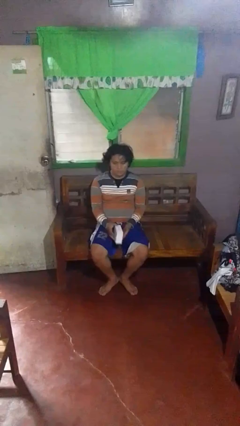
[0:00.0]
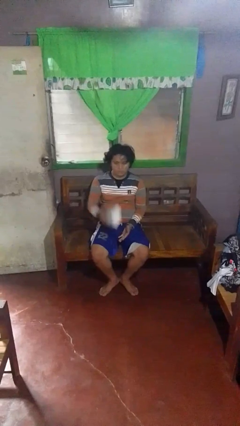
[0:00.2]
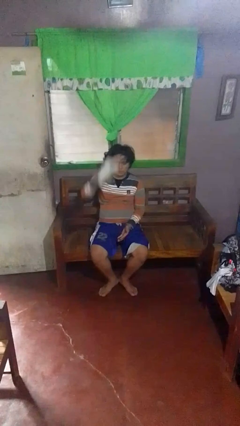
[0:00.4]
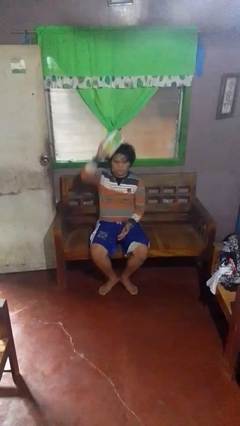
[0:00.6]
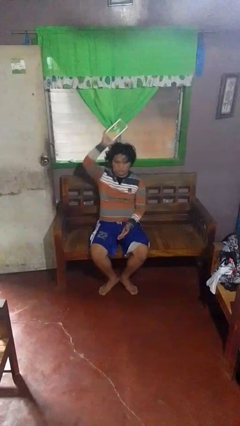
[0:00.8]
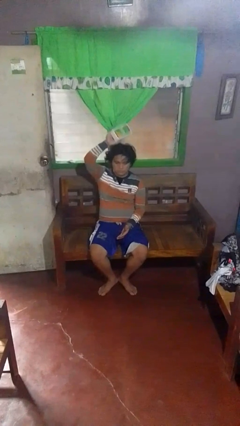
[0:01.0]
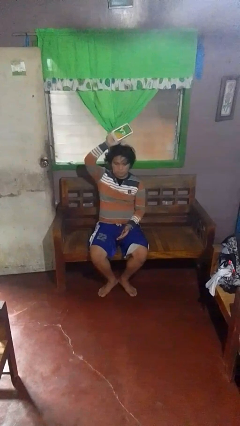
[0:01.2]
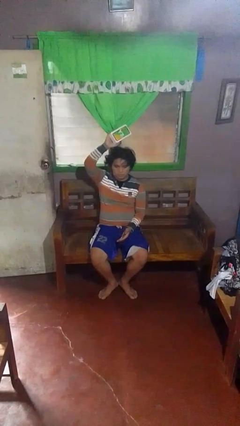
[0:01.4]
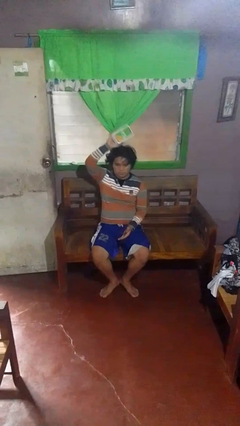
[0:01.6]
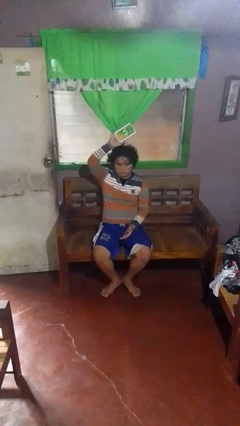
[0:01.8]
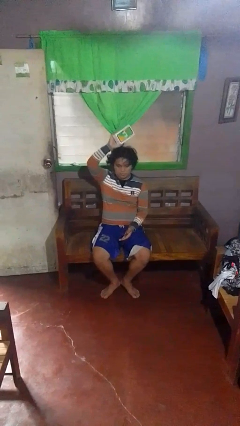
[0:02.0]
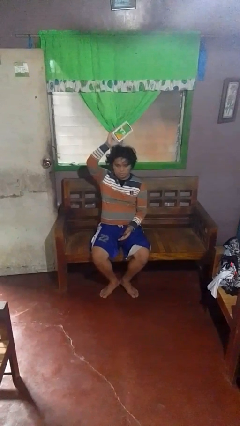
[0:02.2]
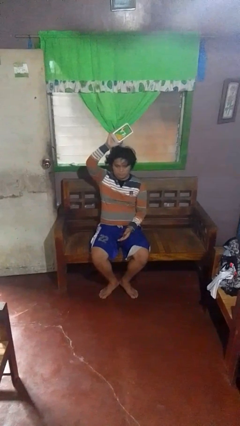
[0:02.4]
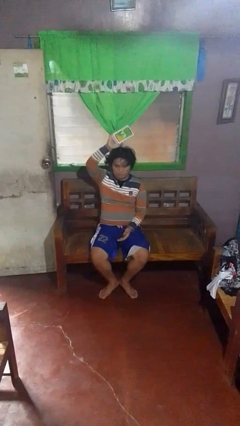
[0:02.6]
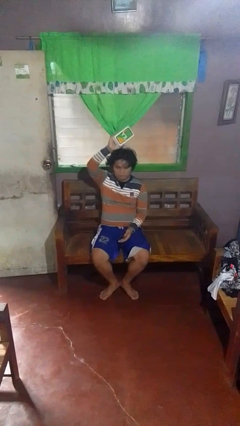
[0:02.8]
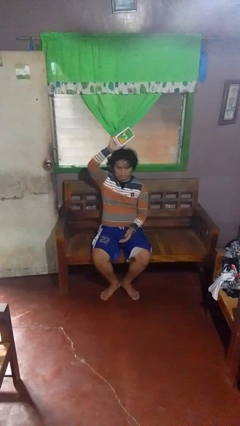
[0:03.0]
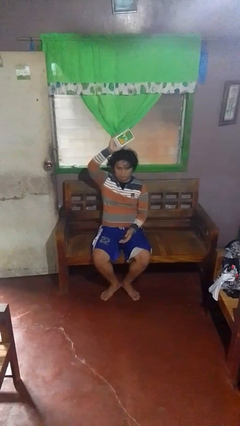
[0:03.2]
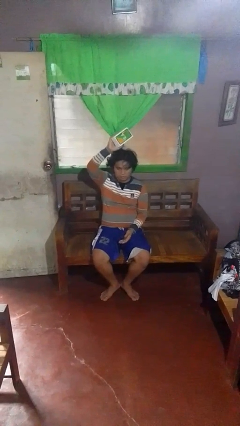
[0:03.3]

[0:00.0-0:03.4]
person holds object above head

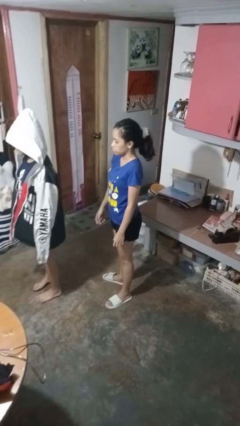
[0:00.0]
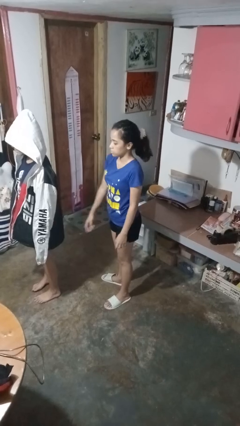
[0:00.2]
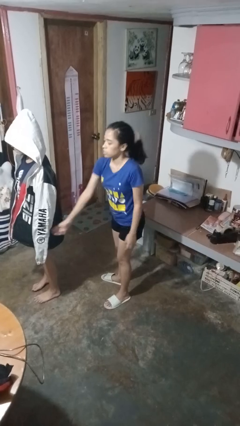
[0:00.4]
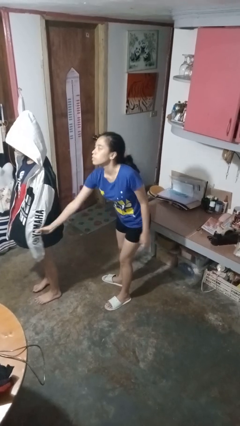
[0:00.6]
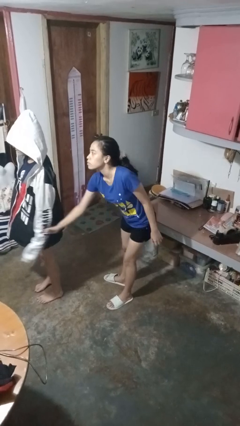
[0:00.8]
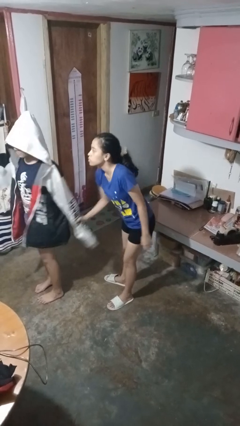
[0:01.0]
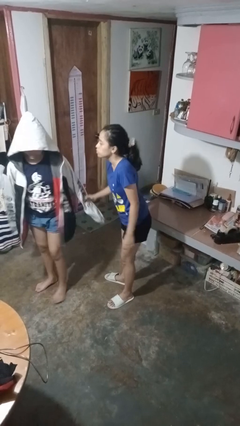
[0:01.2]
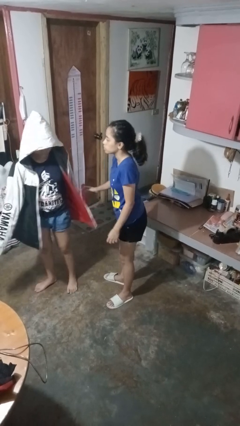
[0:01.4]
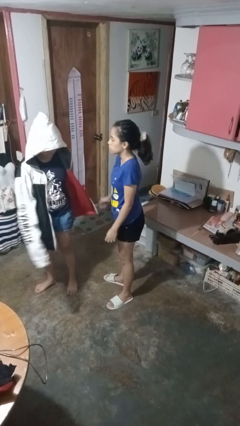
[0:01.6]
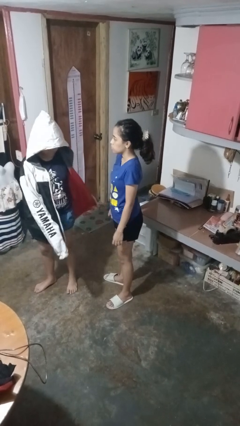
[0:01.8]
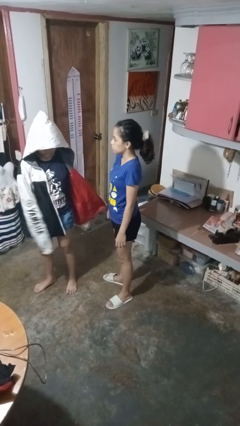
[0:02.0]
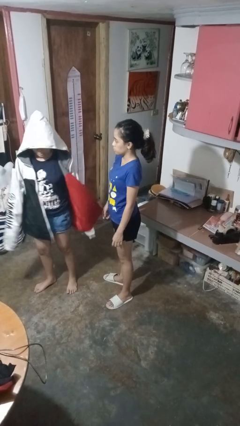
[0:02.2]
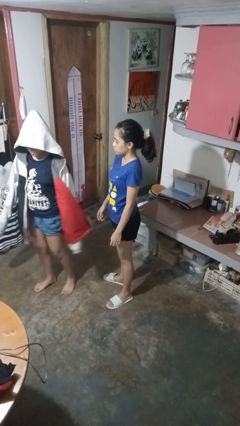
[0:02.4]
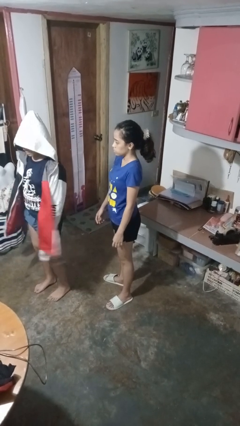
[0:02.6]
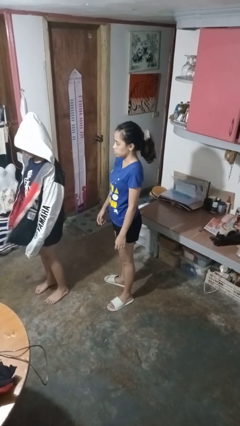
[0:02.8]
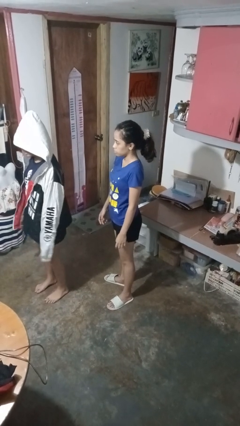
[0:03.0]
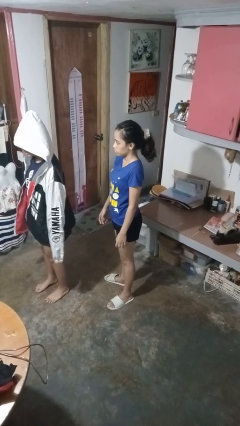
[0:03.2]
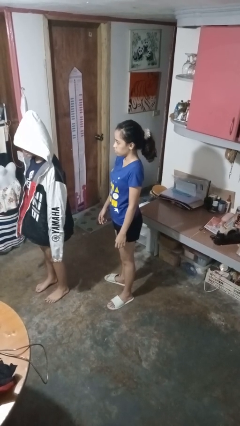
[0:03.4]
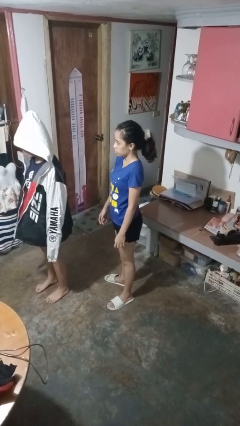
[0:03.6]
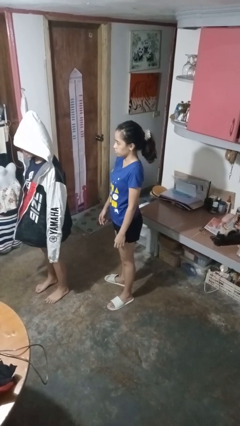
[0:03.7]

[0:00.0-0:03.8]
person grabs person by forearm

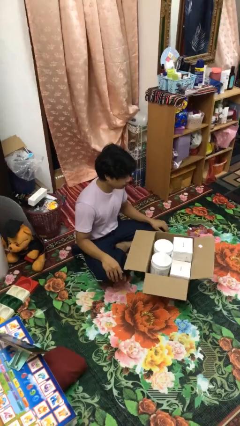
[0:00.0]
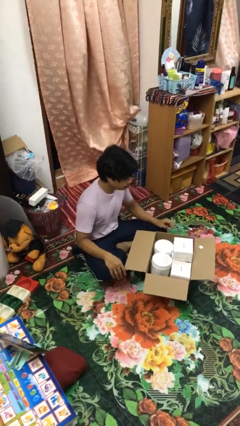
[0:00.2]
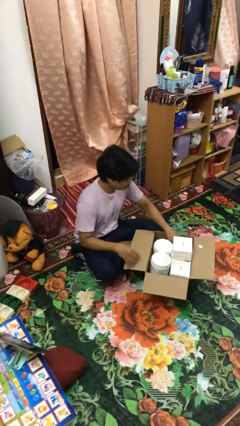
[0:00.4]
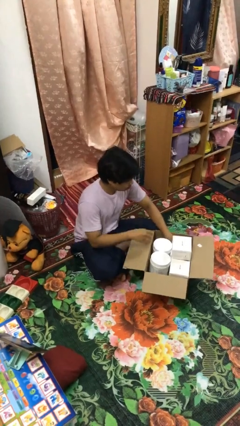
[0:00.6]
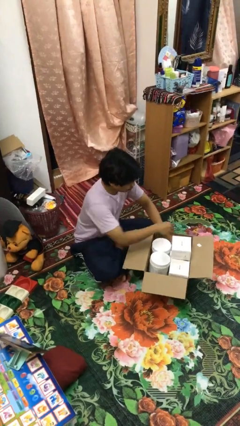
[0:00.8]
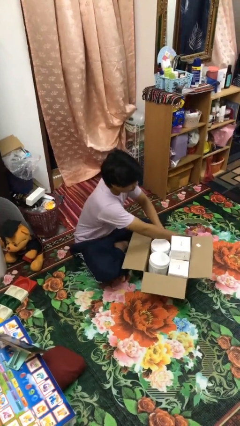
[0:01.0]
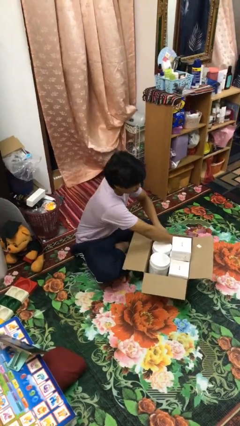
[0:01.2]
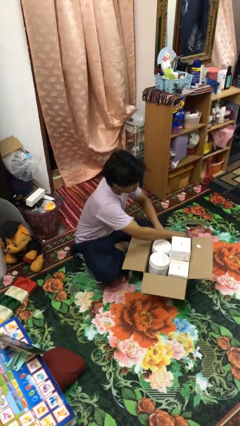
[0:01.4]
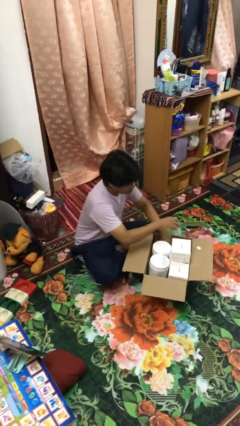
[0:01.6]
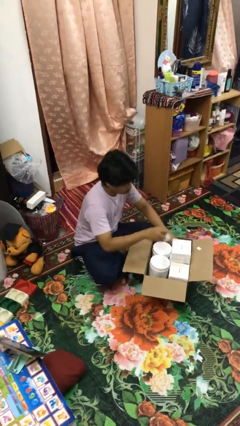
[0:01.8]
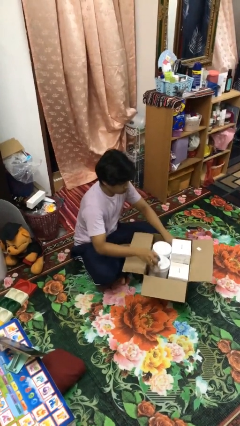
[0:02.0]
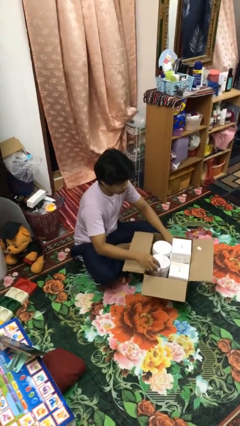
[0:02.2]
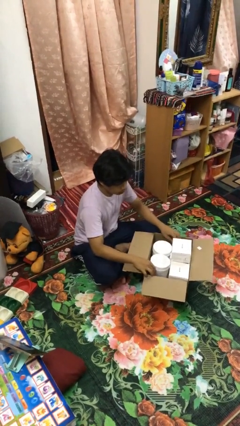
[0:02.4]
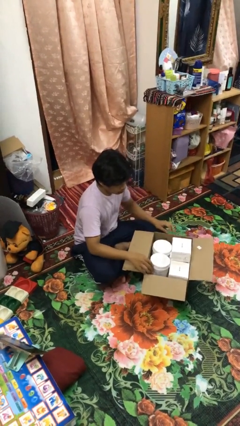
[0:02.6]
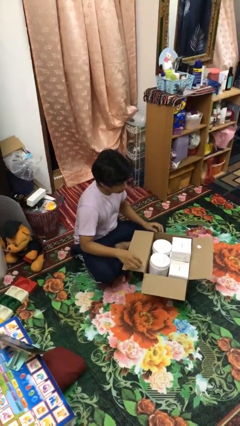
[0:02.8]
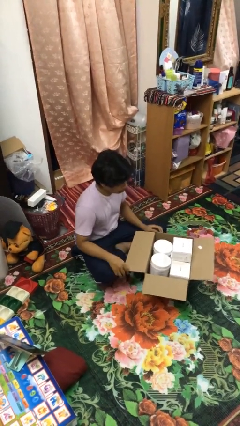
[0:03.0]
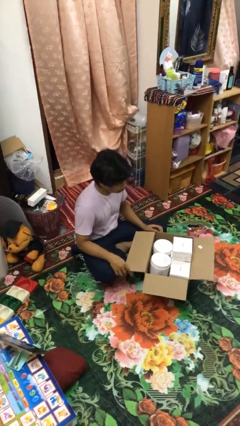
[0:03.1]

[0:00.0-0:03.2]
person searches in box

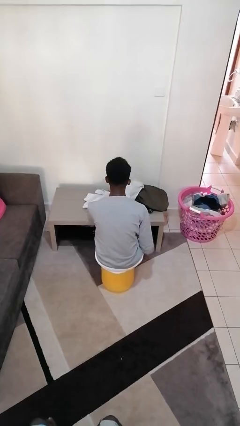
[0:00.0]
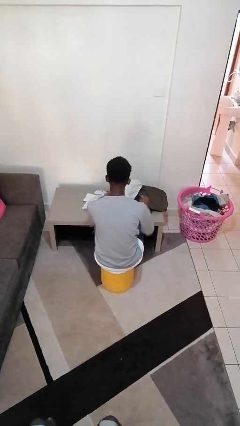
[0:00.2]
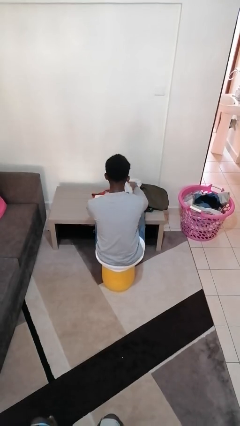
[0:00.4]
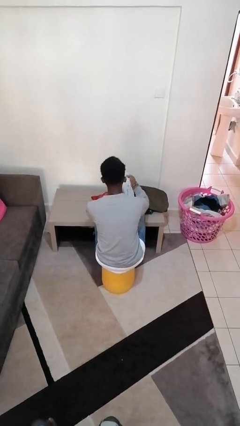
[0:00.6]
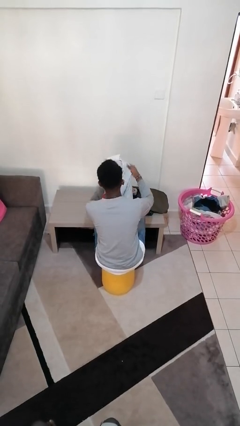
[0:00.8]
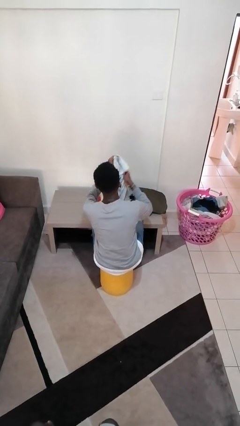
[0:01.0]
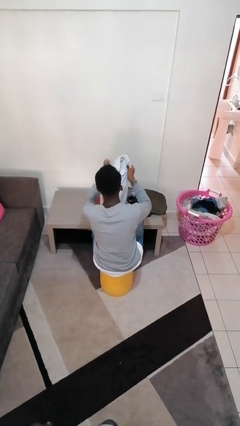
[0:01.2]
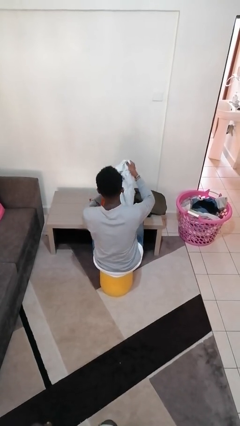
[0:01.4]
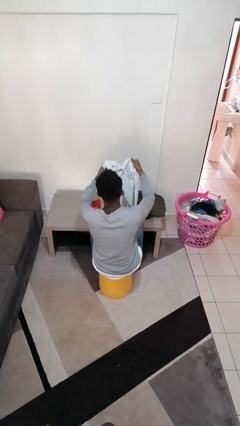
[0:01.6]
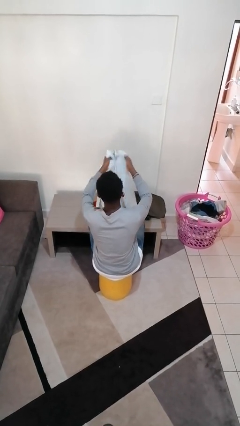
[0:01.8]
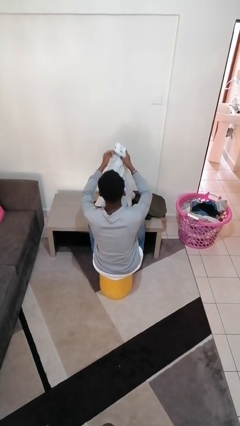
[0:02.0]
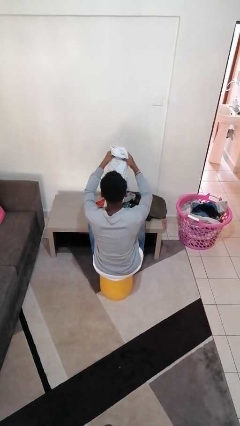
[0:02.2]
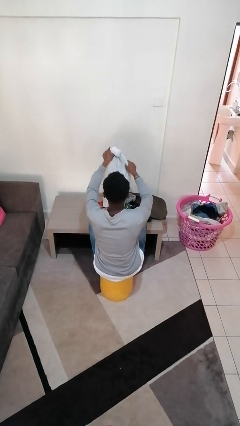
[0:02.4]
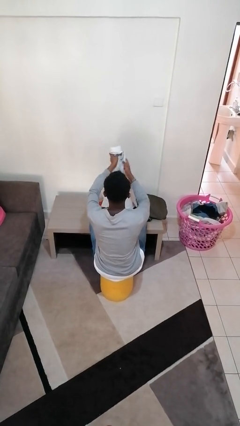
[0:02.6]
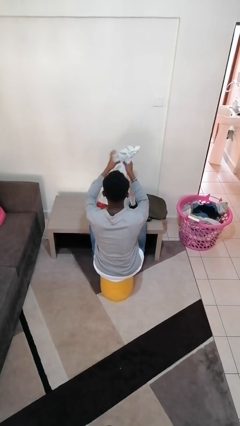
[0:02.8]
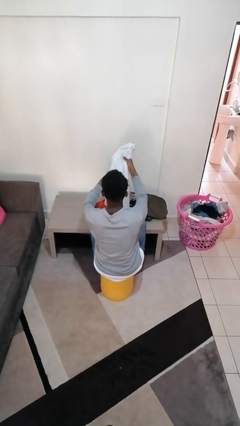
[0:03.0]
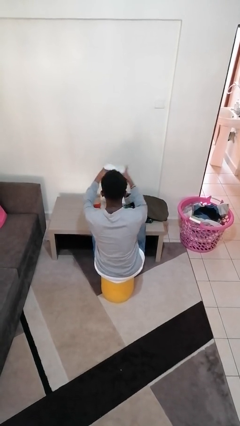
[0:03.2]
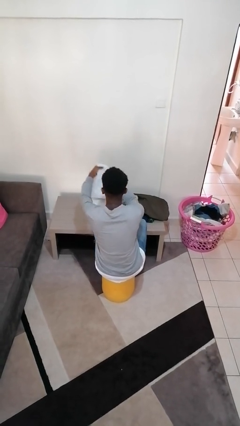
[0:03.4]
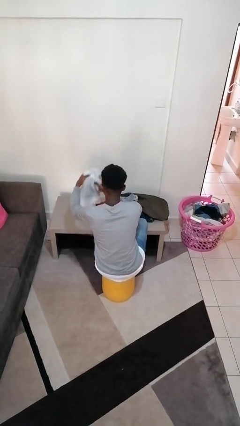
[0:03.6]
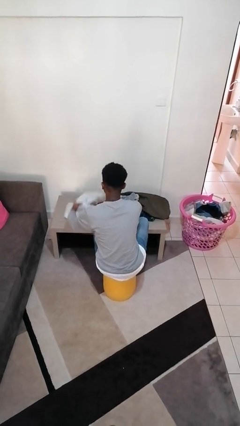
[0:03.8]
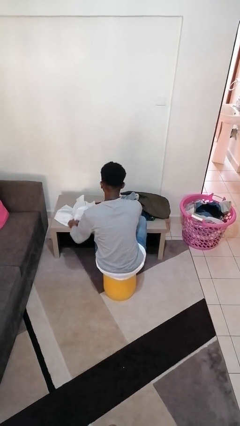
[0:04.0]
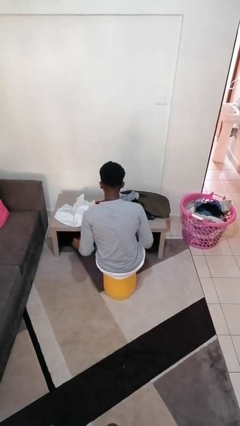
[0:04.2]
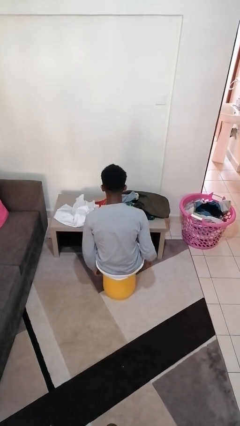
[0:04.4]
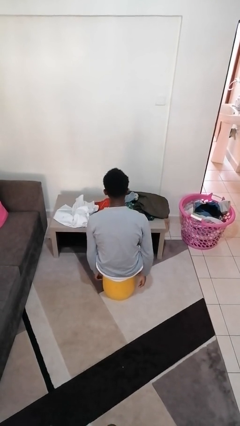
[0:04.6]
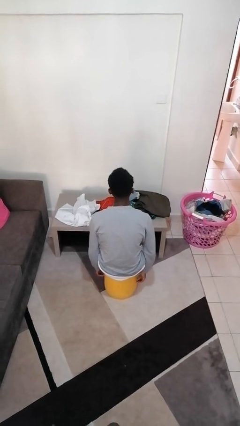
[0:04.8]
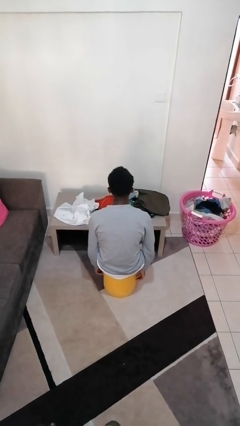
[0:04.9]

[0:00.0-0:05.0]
person folds shirt

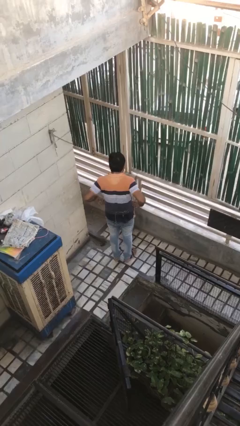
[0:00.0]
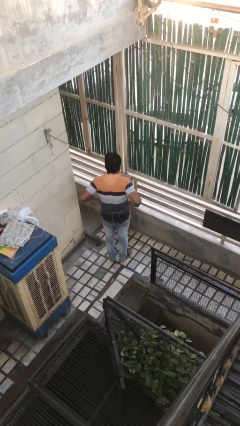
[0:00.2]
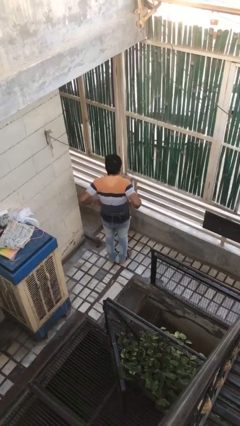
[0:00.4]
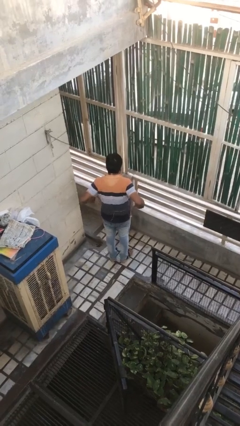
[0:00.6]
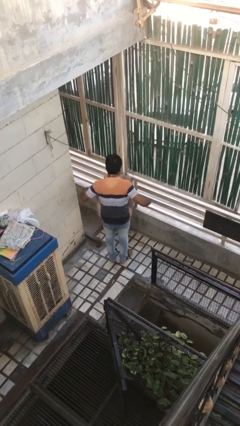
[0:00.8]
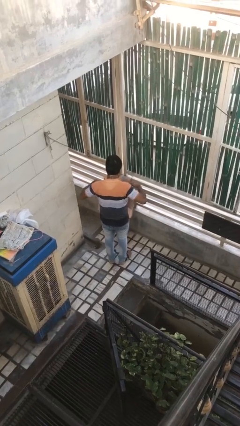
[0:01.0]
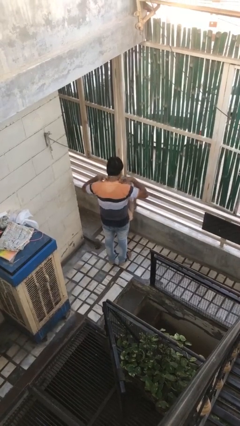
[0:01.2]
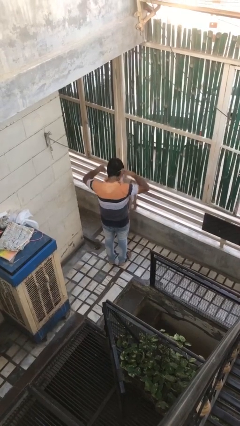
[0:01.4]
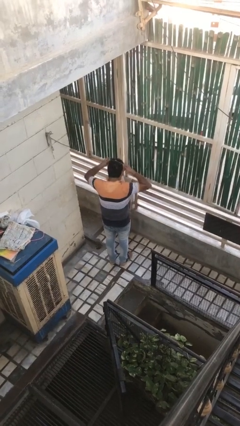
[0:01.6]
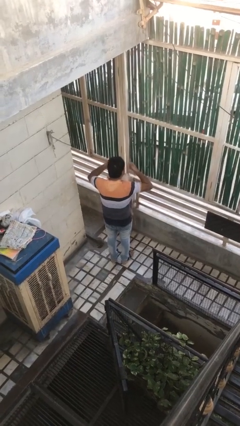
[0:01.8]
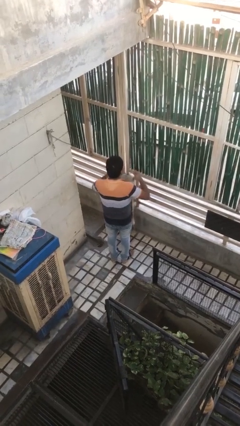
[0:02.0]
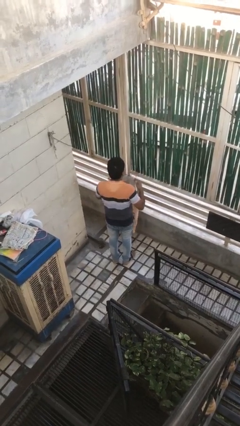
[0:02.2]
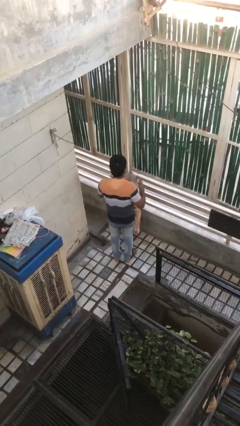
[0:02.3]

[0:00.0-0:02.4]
person takes off apron
